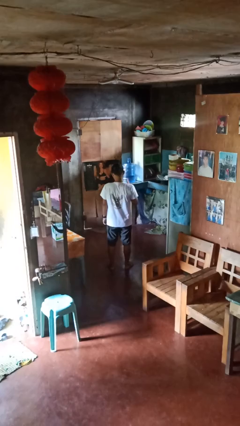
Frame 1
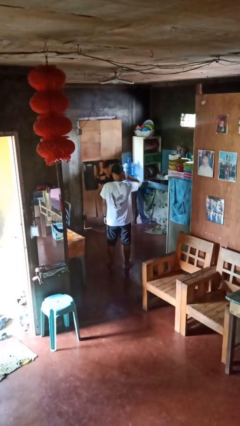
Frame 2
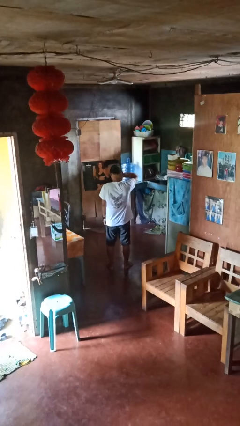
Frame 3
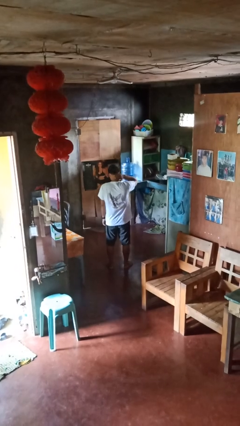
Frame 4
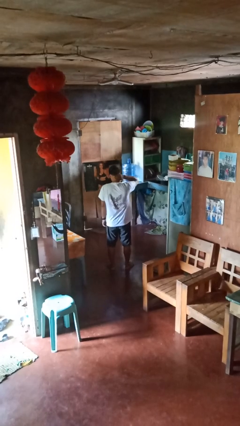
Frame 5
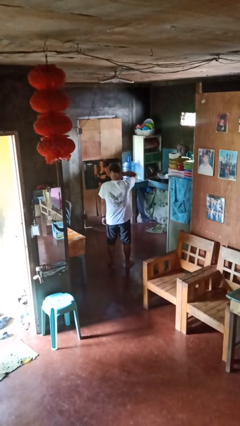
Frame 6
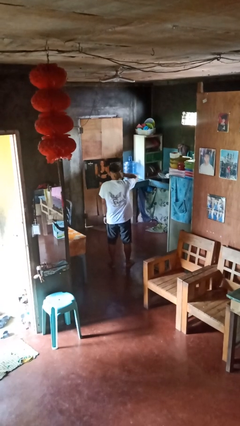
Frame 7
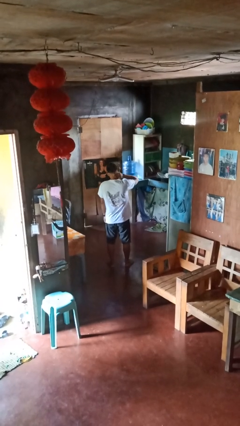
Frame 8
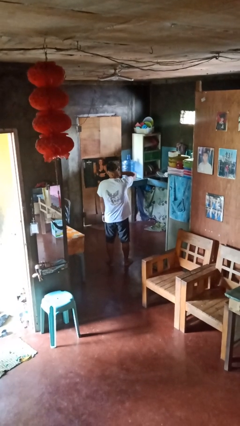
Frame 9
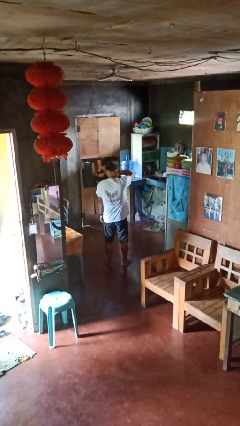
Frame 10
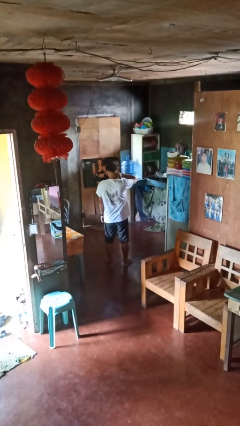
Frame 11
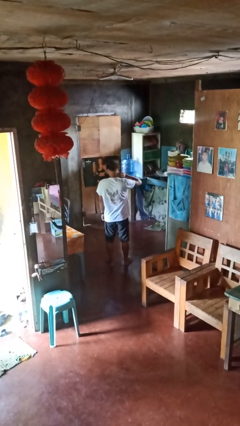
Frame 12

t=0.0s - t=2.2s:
person rubs neck

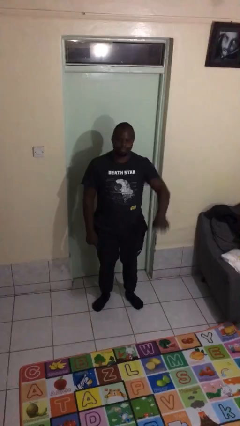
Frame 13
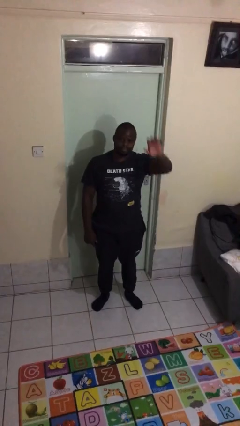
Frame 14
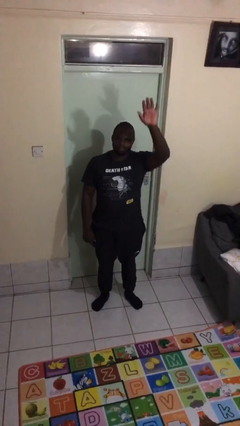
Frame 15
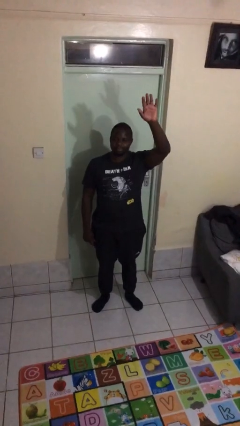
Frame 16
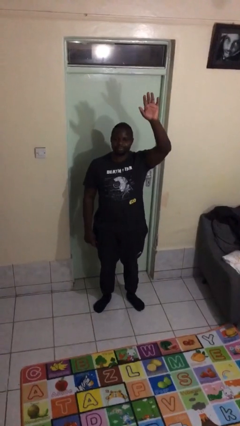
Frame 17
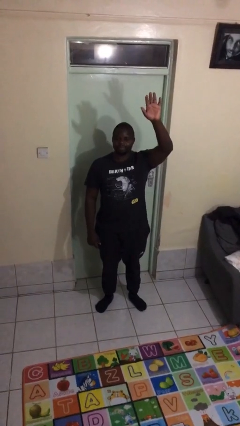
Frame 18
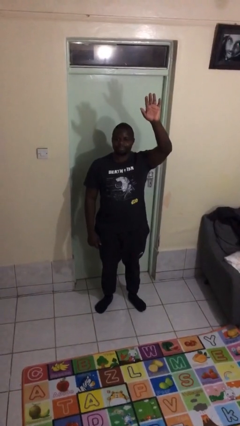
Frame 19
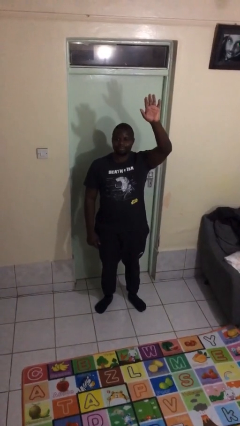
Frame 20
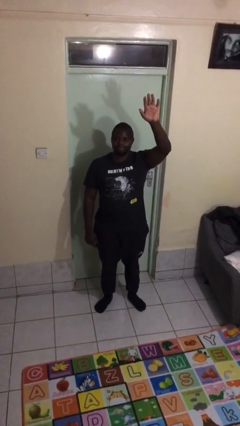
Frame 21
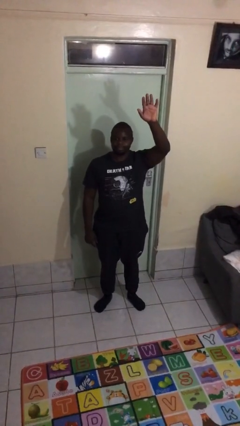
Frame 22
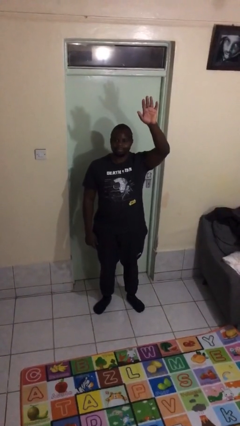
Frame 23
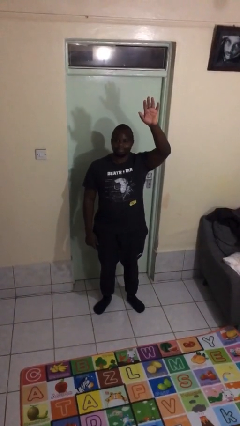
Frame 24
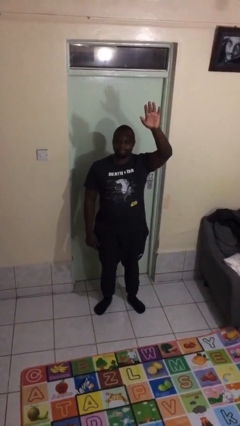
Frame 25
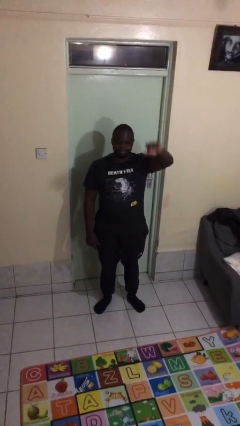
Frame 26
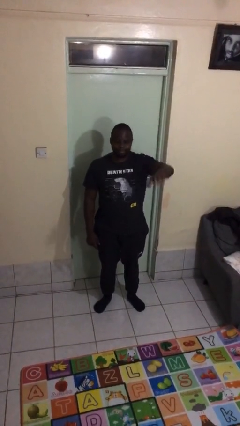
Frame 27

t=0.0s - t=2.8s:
person gestures raise hand

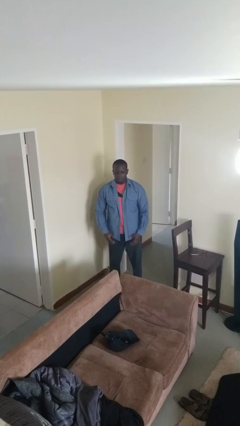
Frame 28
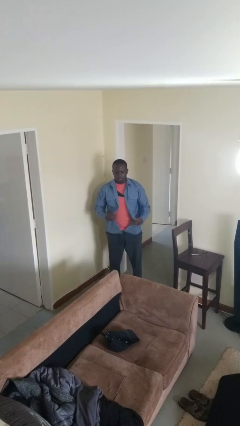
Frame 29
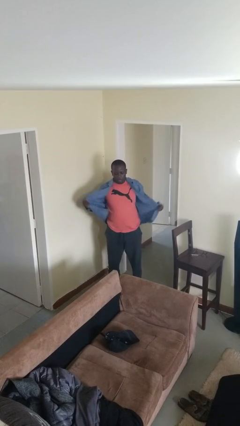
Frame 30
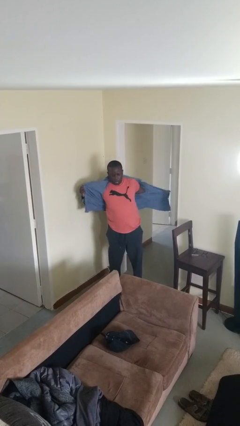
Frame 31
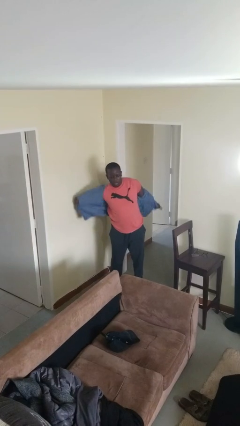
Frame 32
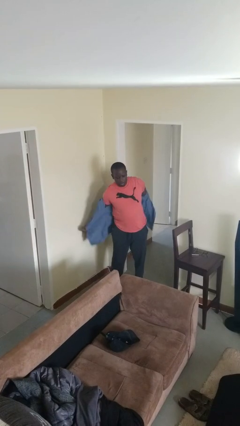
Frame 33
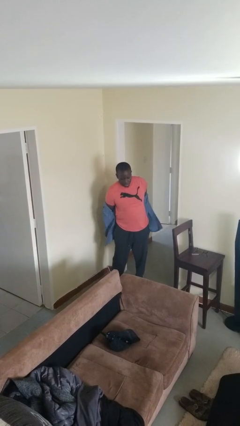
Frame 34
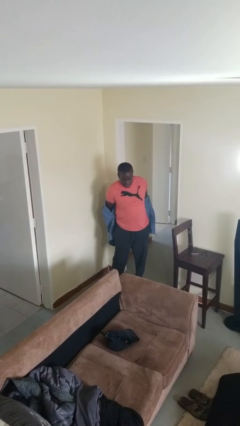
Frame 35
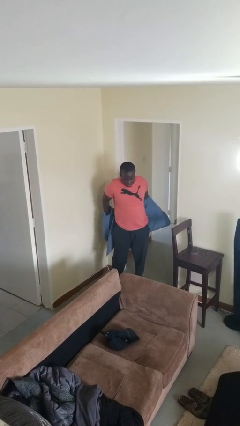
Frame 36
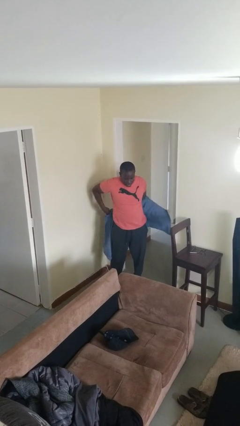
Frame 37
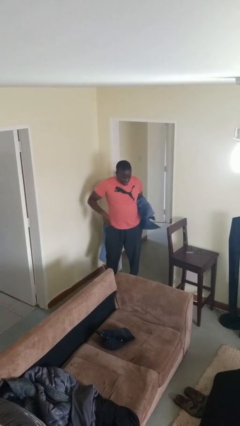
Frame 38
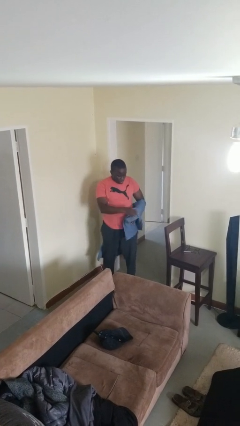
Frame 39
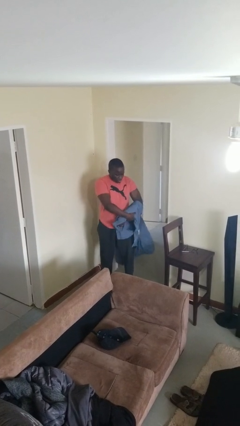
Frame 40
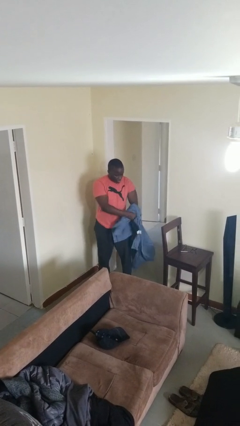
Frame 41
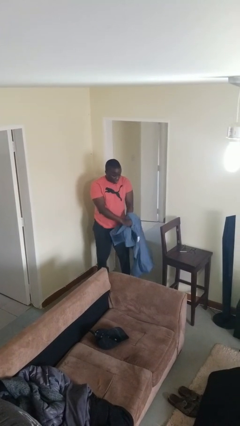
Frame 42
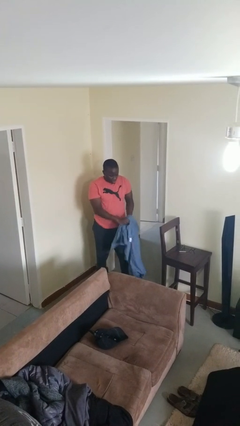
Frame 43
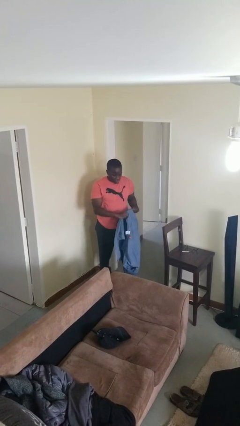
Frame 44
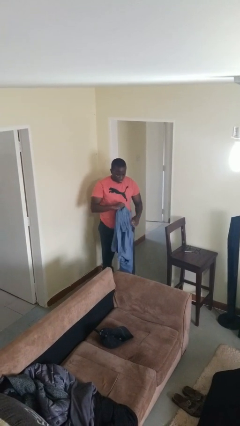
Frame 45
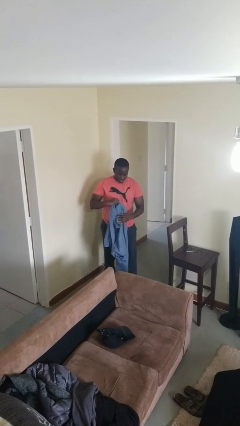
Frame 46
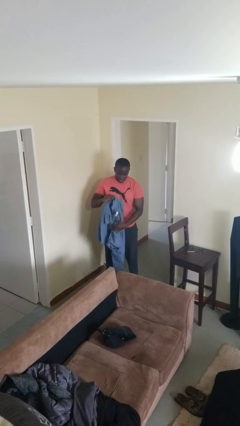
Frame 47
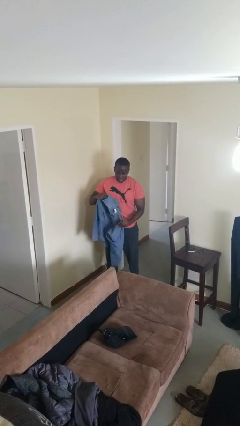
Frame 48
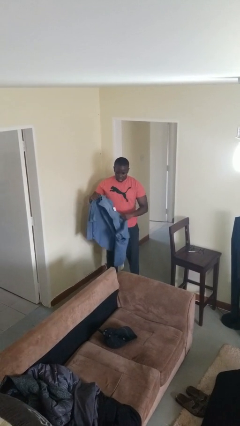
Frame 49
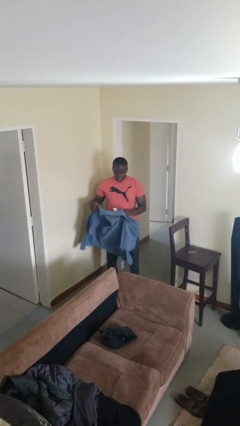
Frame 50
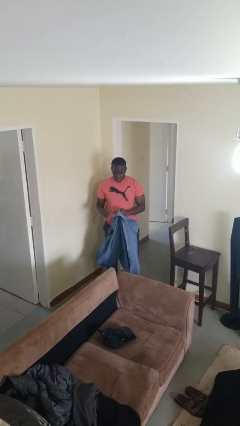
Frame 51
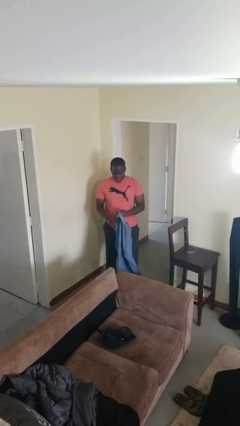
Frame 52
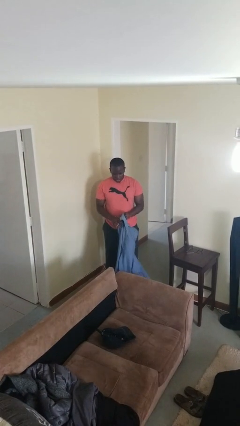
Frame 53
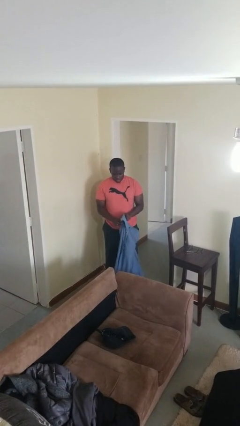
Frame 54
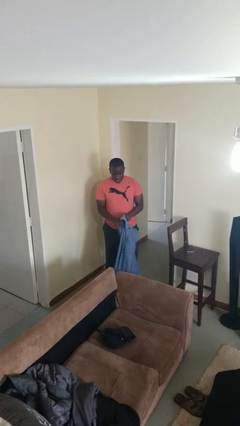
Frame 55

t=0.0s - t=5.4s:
person takes off shirt

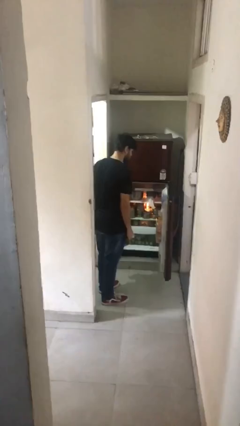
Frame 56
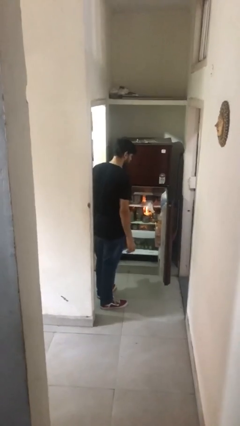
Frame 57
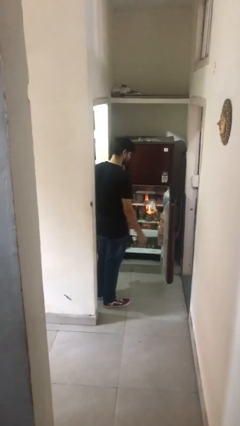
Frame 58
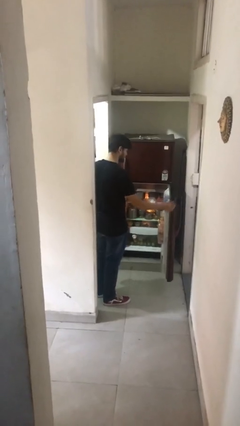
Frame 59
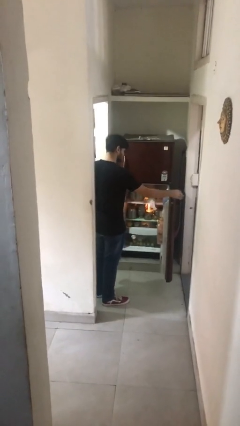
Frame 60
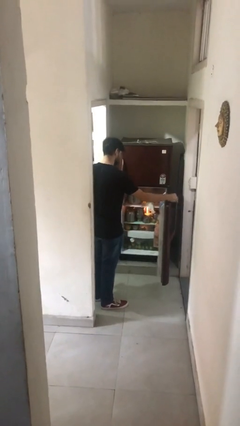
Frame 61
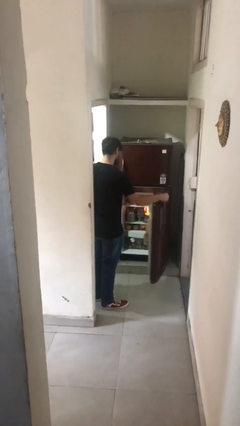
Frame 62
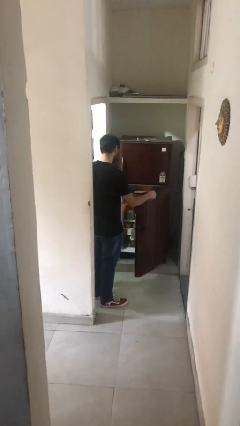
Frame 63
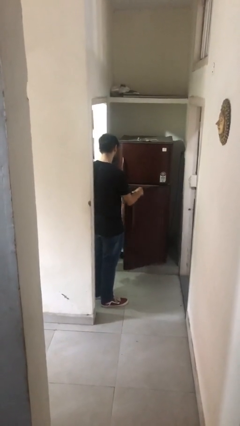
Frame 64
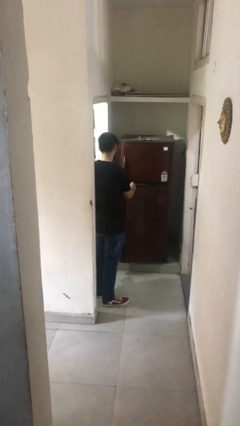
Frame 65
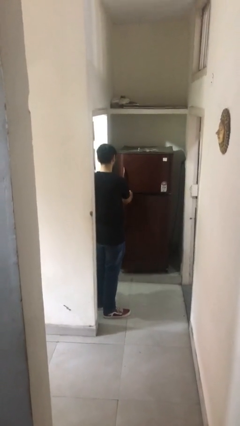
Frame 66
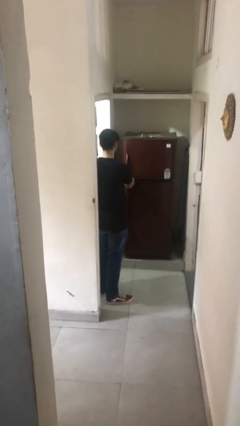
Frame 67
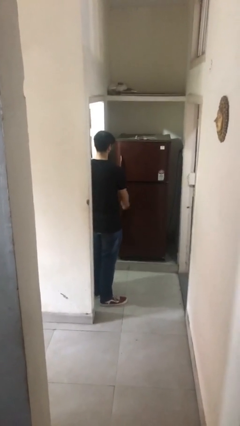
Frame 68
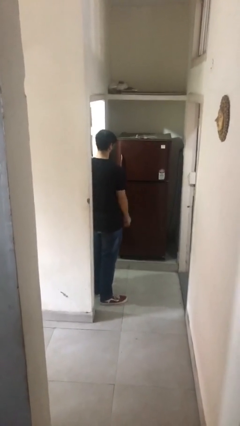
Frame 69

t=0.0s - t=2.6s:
person closes refrigerator

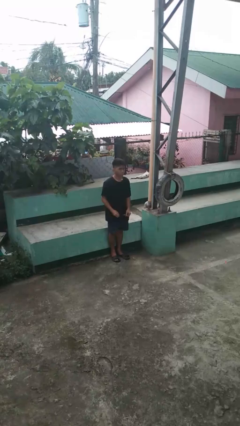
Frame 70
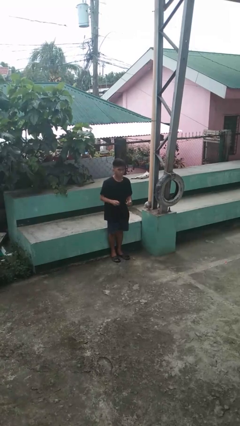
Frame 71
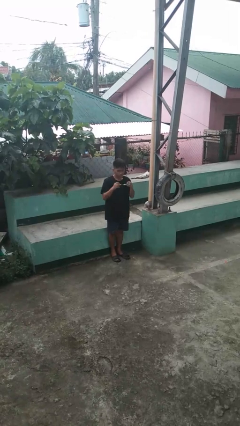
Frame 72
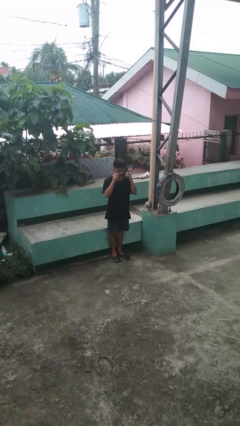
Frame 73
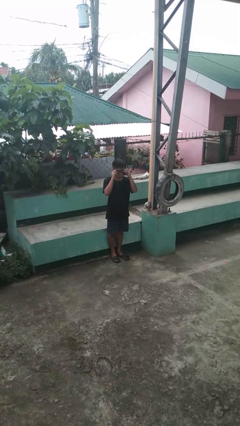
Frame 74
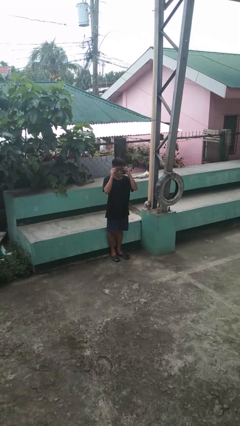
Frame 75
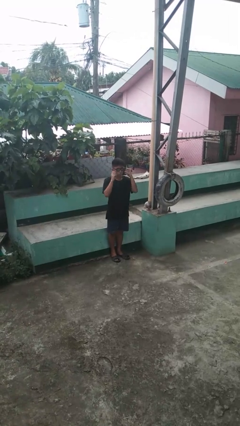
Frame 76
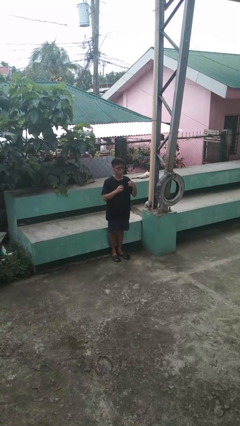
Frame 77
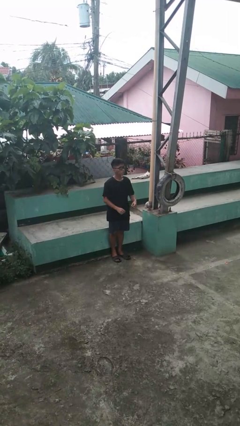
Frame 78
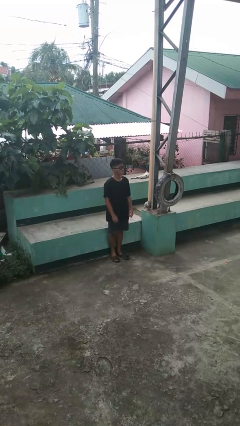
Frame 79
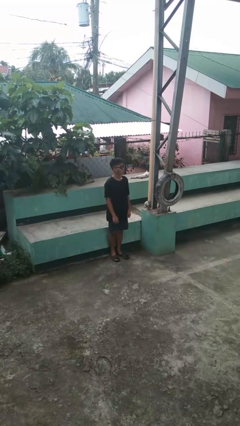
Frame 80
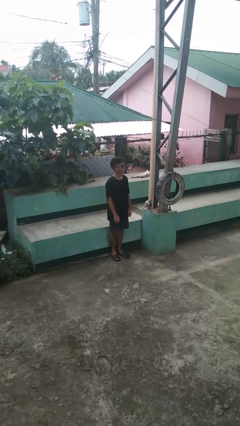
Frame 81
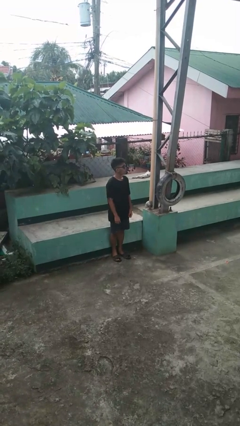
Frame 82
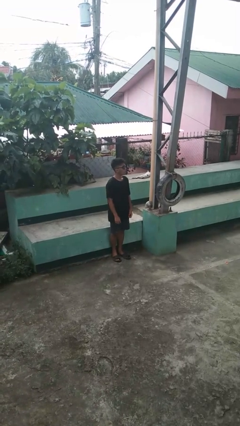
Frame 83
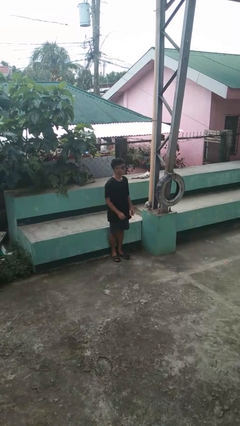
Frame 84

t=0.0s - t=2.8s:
person puts on sunglasses

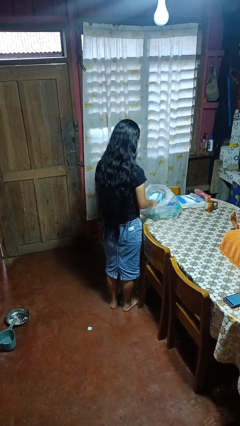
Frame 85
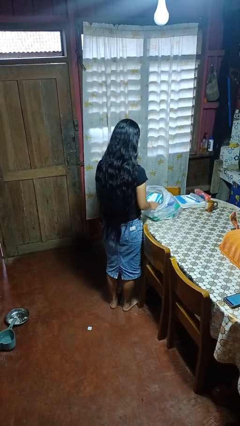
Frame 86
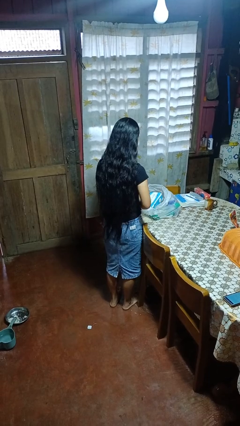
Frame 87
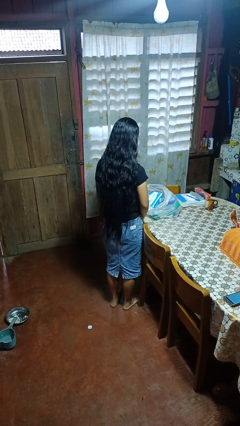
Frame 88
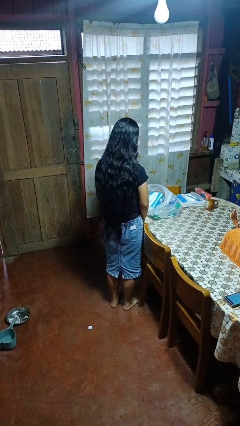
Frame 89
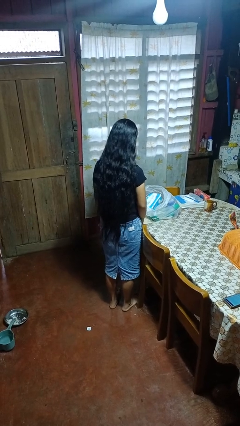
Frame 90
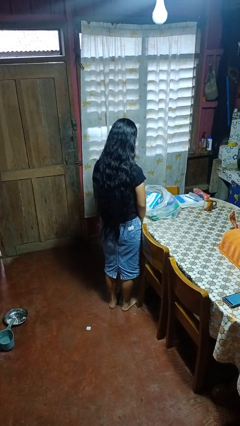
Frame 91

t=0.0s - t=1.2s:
person puts object into bag

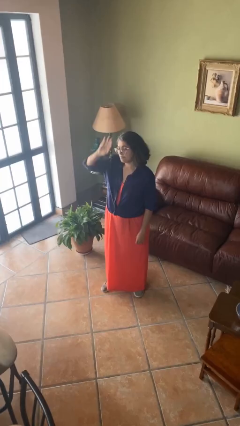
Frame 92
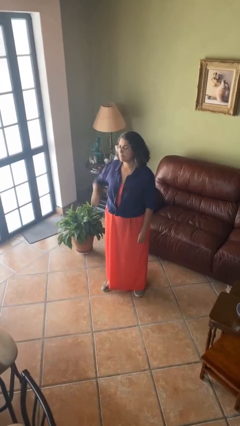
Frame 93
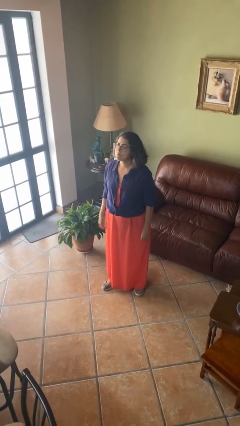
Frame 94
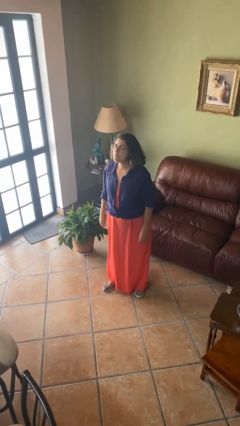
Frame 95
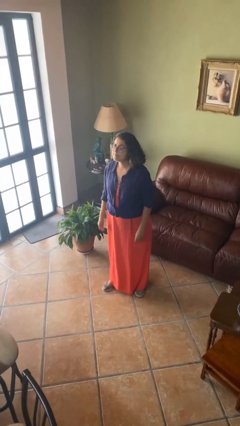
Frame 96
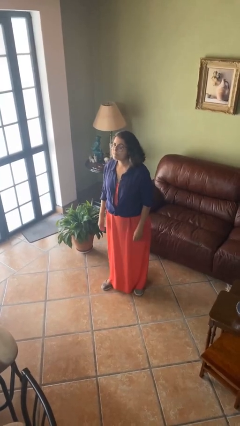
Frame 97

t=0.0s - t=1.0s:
person gestures lower hand
